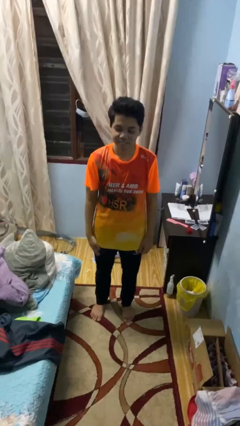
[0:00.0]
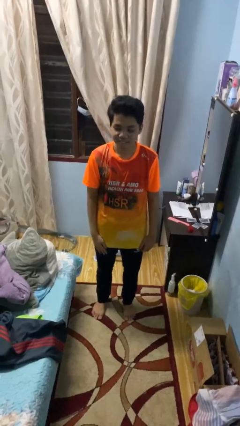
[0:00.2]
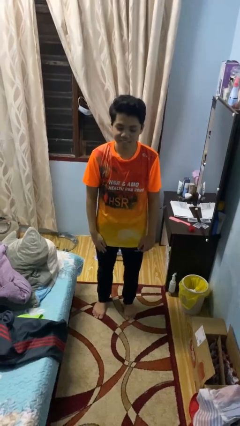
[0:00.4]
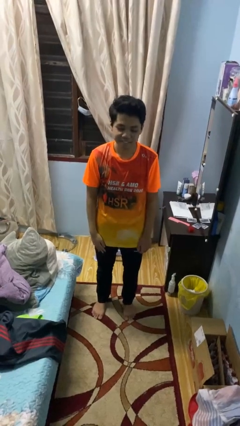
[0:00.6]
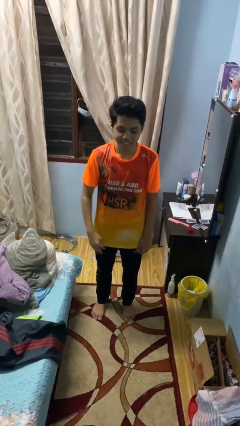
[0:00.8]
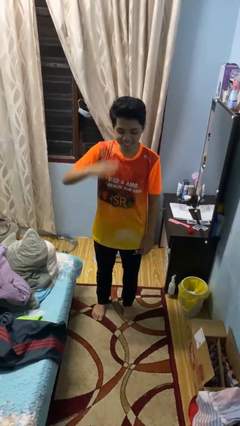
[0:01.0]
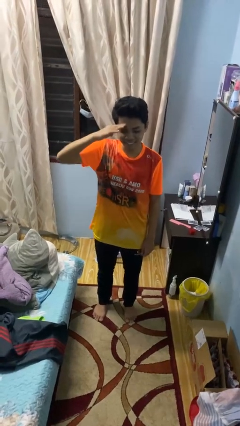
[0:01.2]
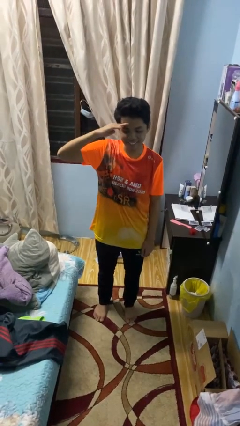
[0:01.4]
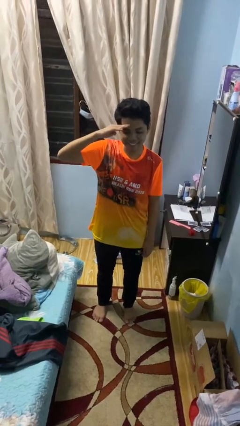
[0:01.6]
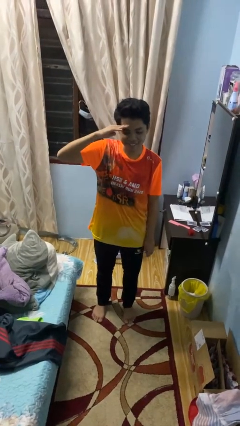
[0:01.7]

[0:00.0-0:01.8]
person salutes

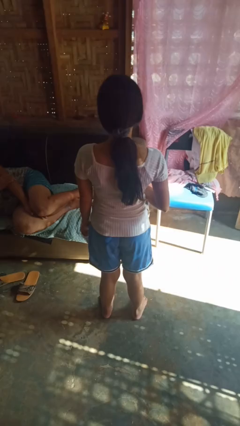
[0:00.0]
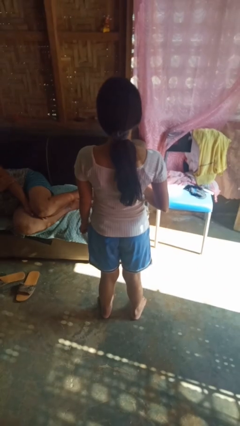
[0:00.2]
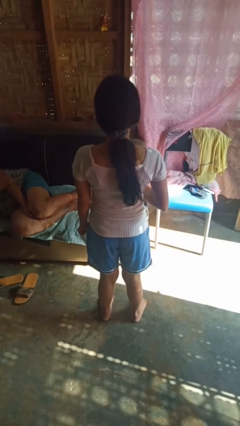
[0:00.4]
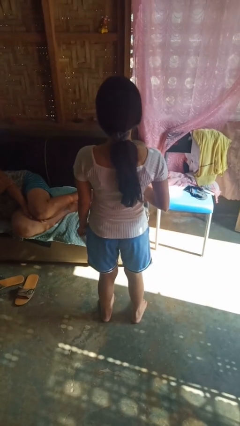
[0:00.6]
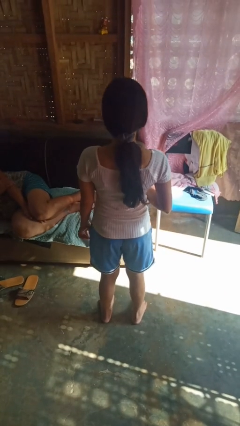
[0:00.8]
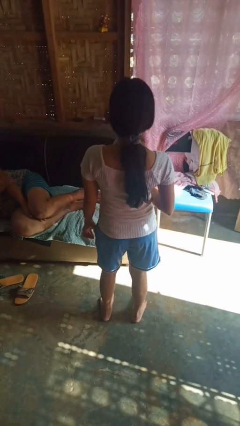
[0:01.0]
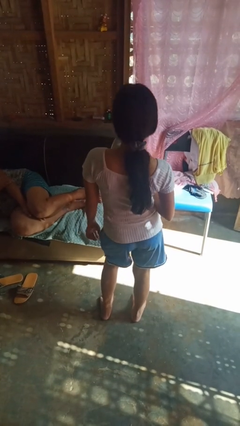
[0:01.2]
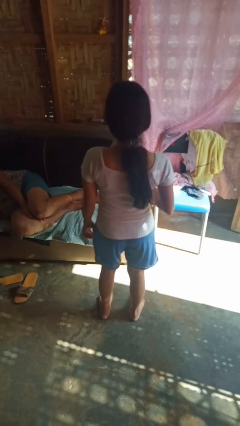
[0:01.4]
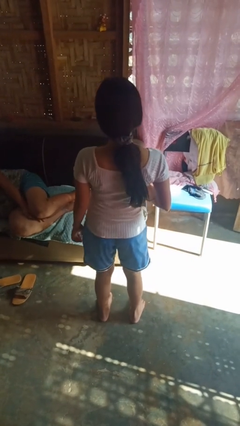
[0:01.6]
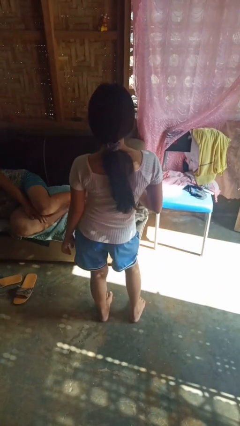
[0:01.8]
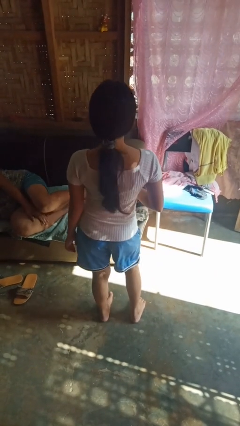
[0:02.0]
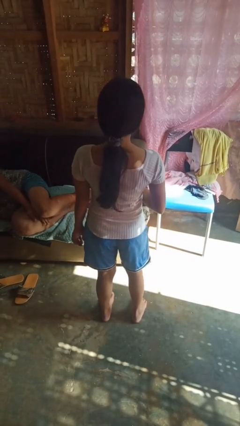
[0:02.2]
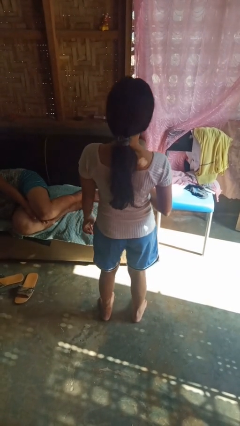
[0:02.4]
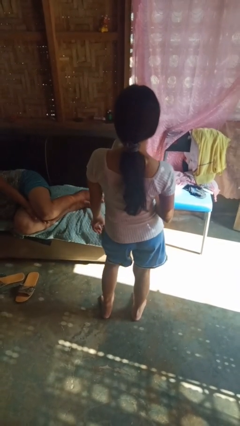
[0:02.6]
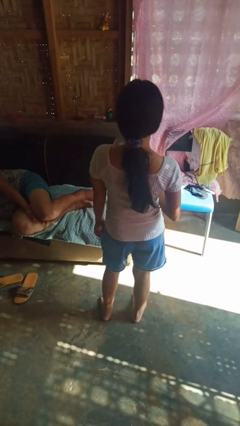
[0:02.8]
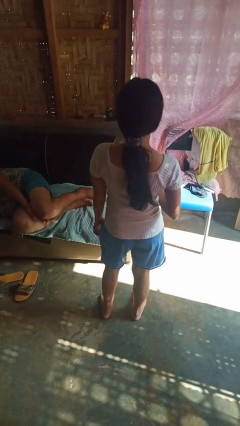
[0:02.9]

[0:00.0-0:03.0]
person wiggles hips

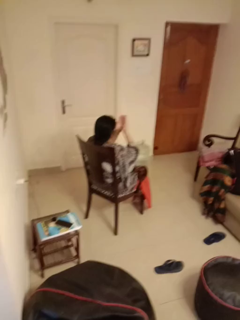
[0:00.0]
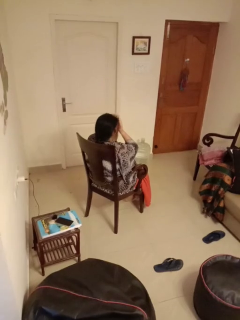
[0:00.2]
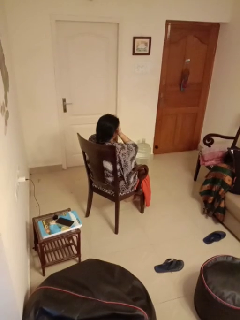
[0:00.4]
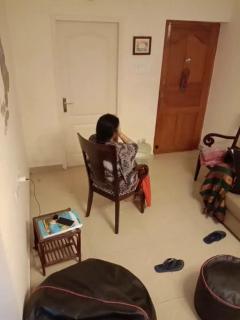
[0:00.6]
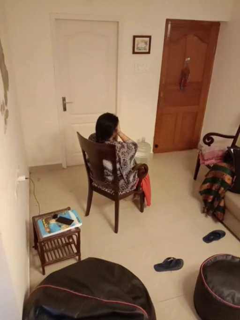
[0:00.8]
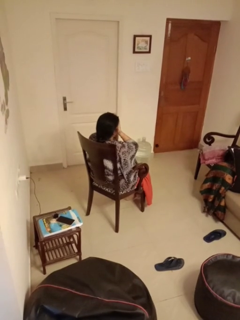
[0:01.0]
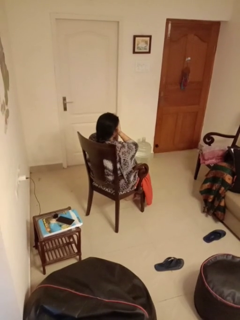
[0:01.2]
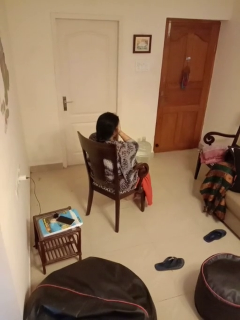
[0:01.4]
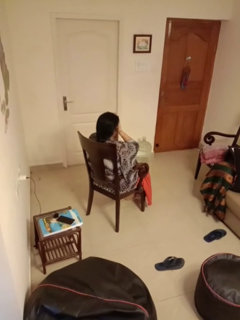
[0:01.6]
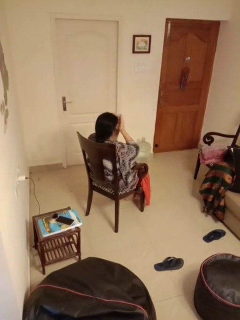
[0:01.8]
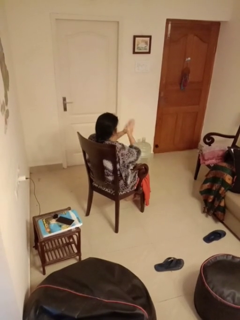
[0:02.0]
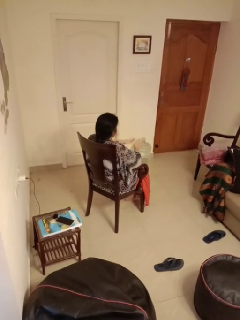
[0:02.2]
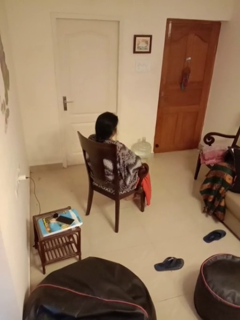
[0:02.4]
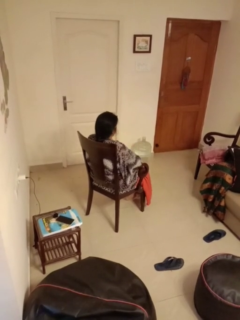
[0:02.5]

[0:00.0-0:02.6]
person covers face with hands

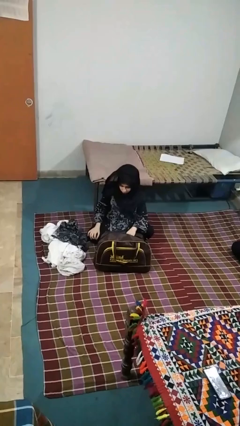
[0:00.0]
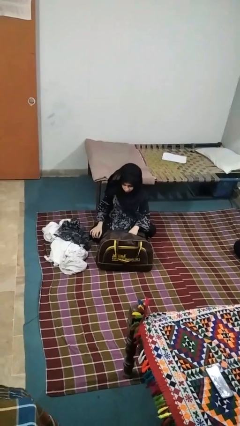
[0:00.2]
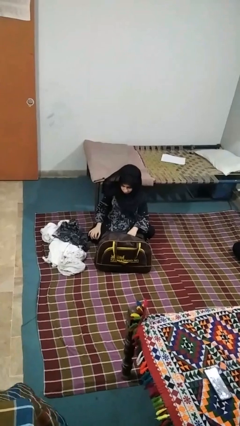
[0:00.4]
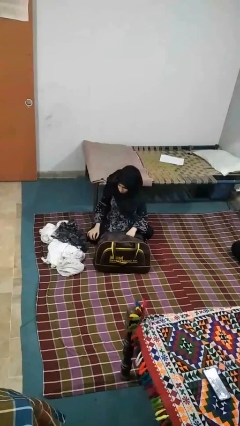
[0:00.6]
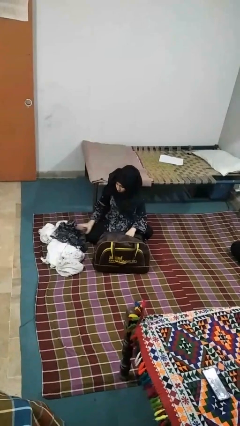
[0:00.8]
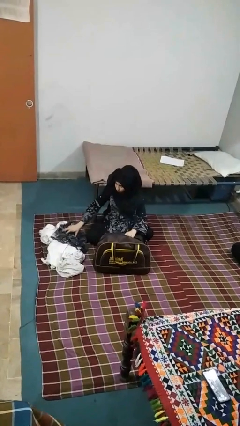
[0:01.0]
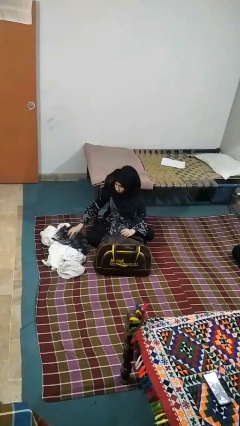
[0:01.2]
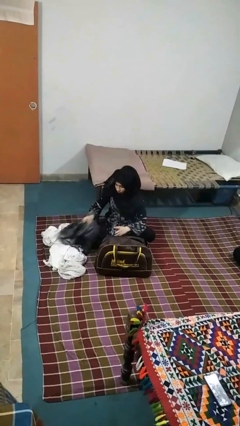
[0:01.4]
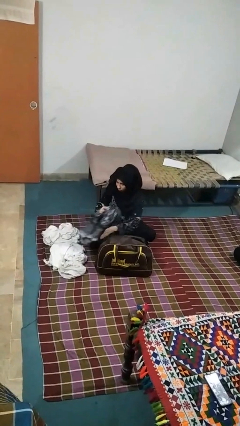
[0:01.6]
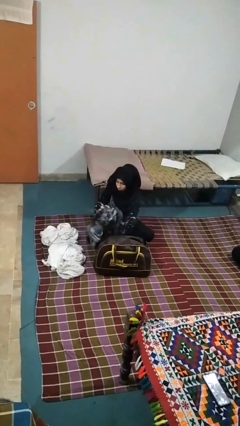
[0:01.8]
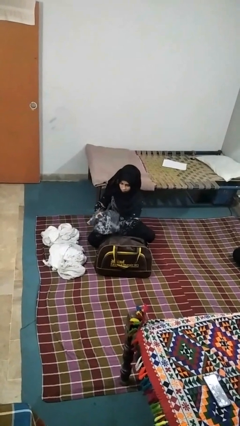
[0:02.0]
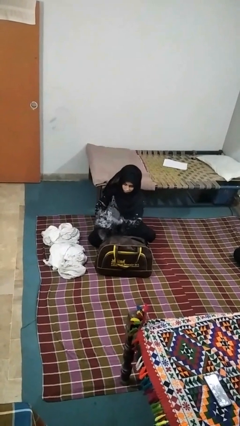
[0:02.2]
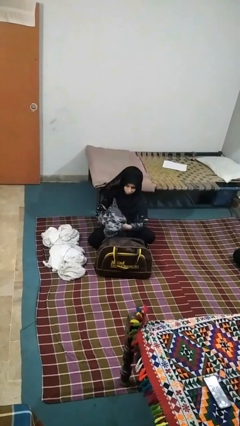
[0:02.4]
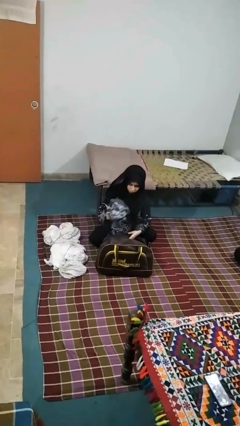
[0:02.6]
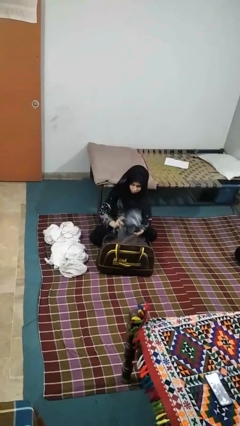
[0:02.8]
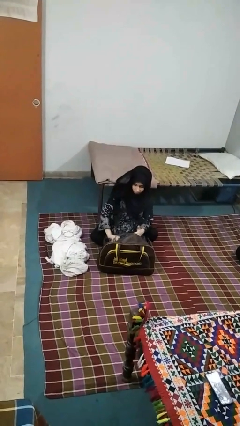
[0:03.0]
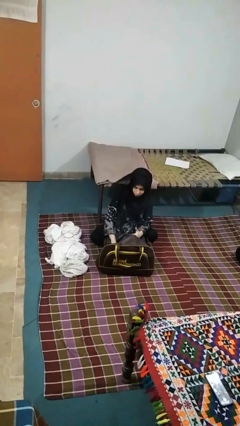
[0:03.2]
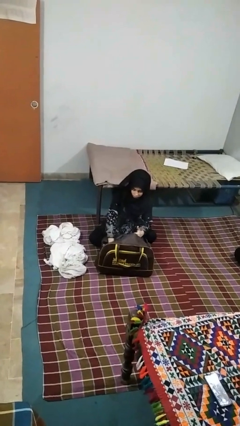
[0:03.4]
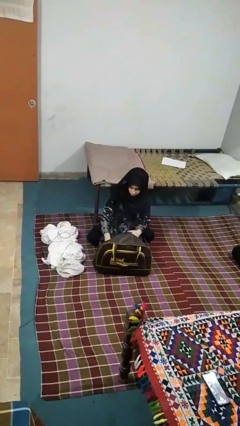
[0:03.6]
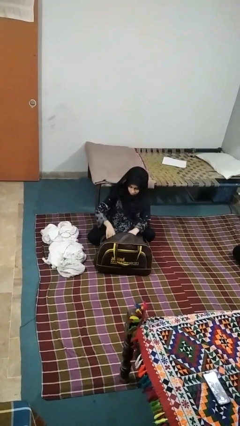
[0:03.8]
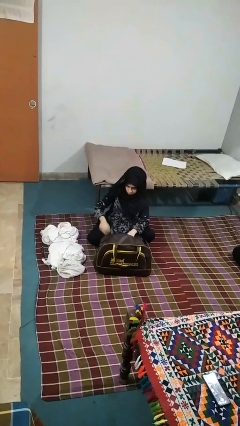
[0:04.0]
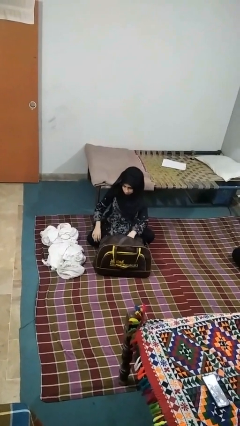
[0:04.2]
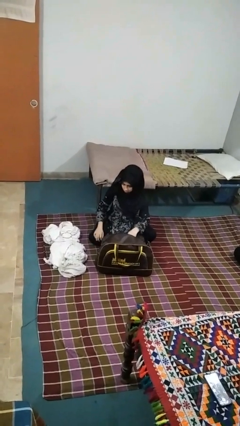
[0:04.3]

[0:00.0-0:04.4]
person loads clothes into suitcase

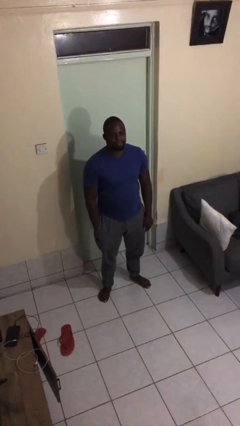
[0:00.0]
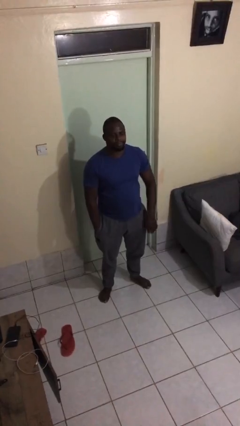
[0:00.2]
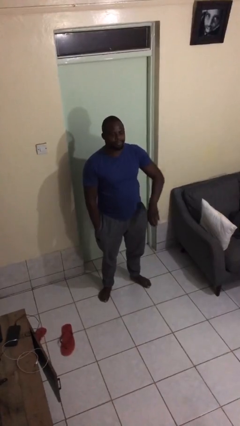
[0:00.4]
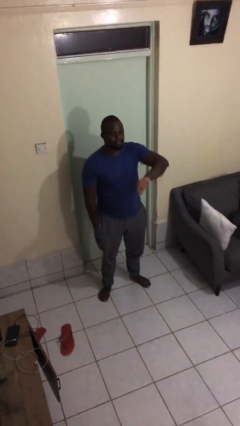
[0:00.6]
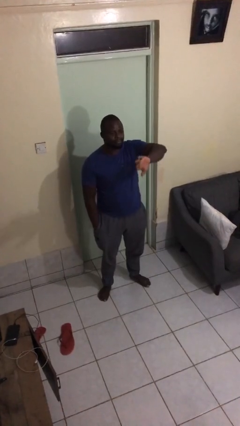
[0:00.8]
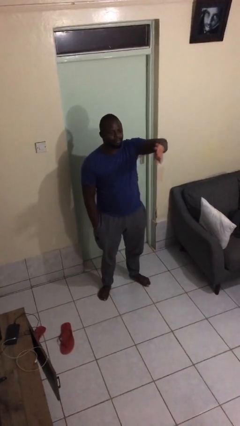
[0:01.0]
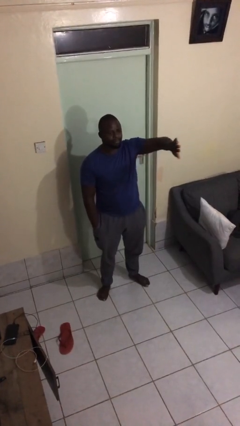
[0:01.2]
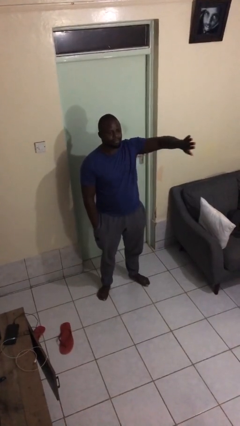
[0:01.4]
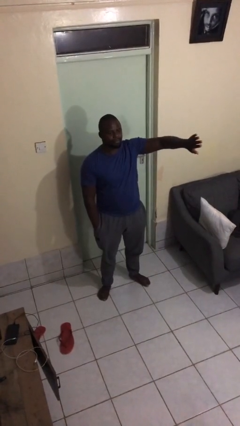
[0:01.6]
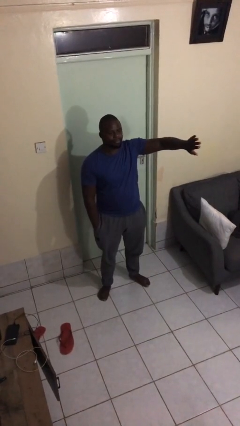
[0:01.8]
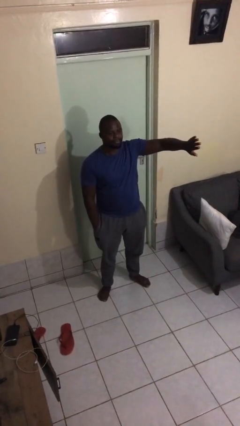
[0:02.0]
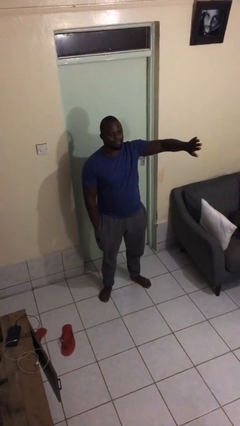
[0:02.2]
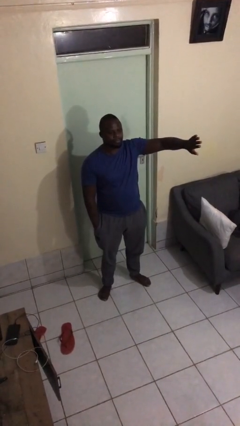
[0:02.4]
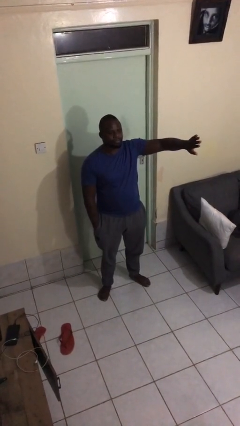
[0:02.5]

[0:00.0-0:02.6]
person gestures swipe left

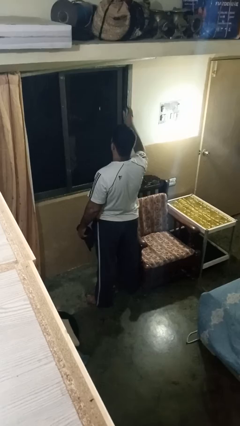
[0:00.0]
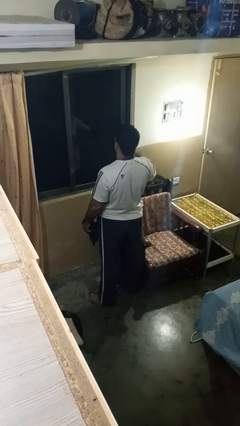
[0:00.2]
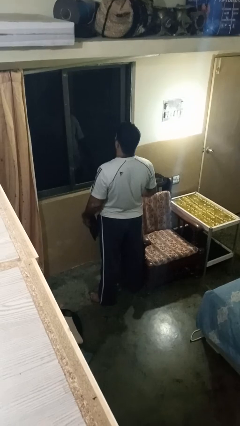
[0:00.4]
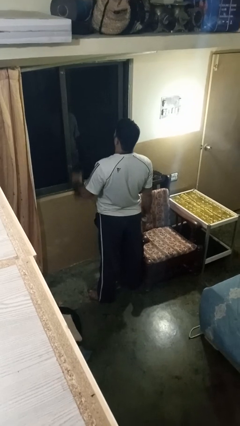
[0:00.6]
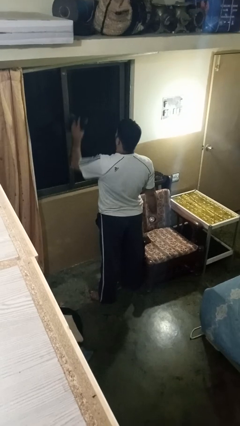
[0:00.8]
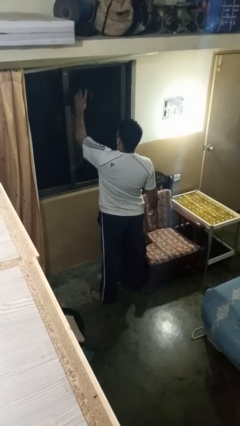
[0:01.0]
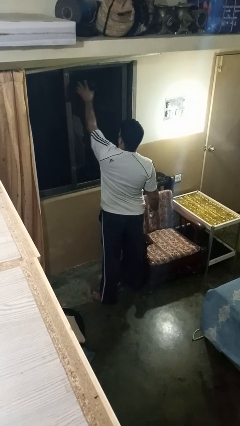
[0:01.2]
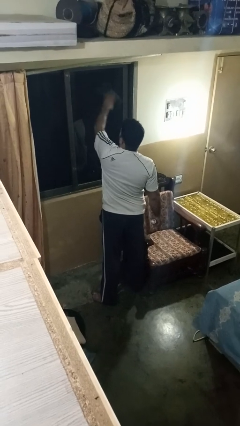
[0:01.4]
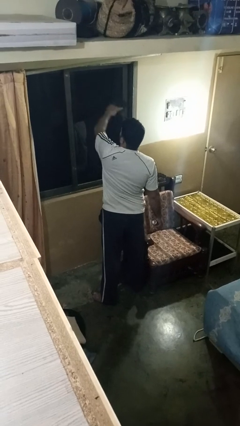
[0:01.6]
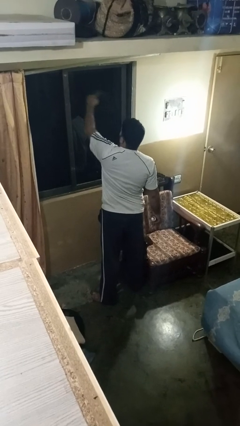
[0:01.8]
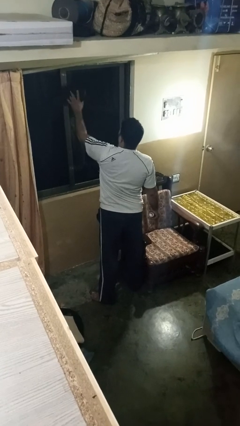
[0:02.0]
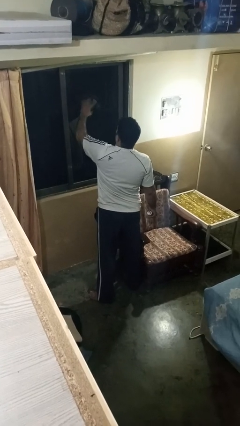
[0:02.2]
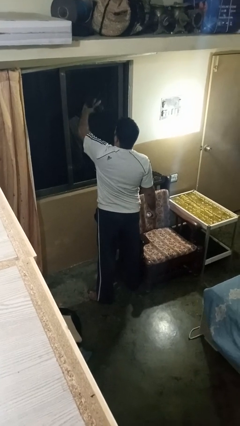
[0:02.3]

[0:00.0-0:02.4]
person washes window

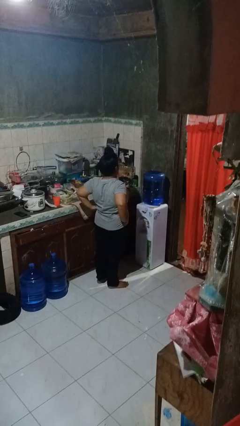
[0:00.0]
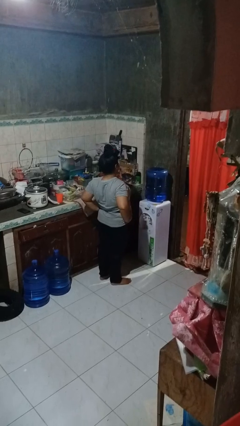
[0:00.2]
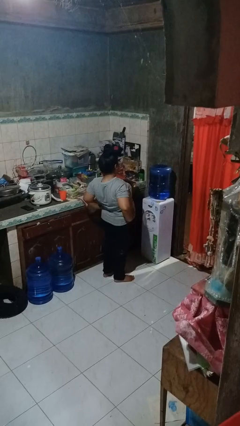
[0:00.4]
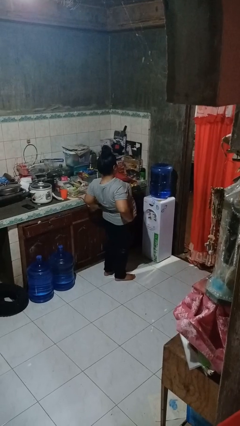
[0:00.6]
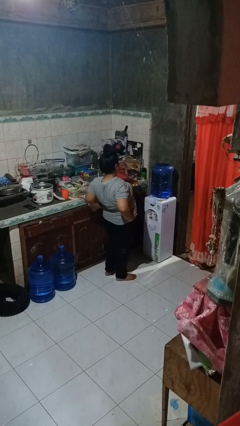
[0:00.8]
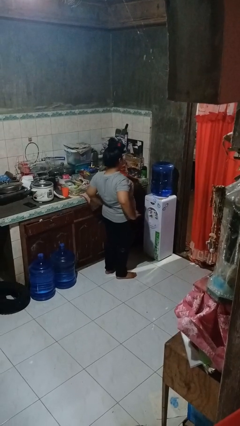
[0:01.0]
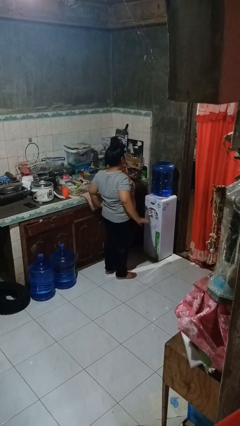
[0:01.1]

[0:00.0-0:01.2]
person stretches back
